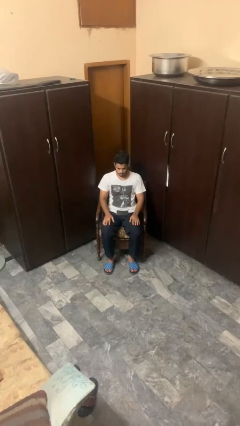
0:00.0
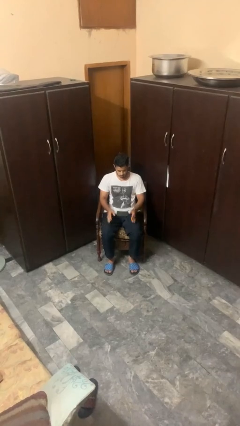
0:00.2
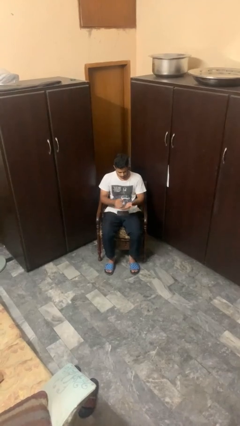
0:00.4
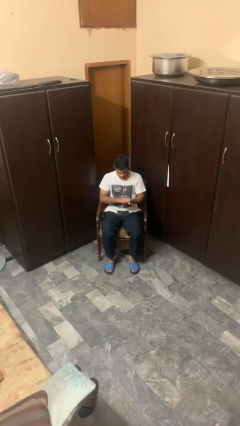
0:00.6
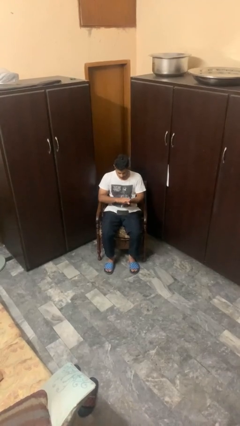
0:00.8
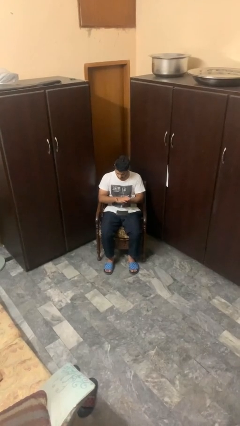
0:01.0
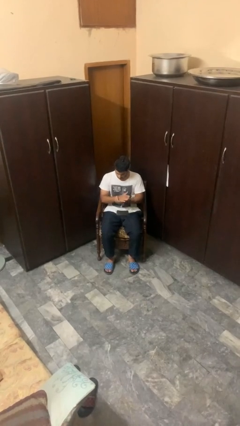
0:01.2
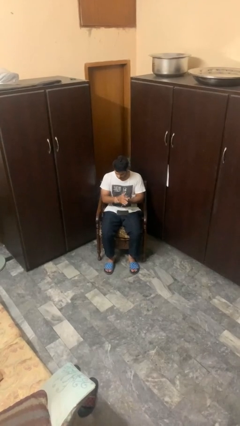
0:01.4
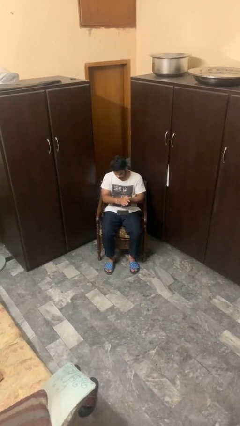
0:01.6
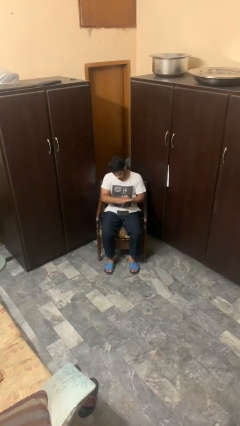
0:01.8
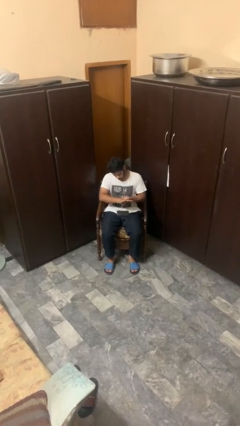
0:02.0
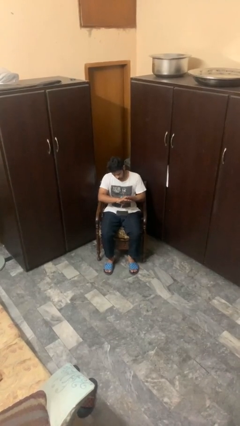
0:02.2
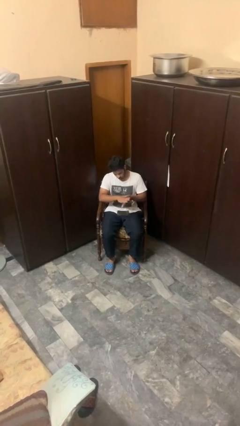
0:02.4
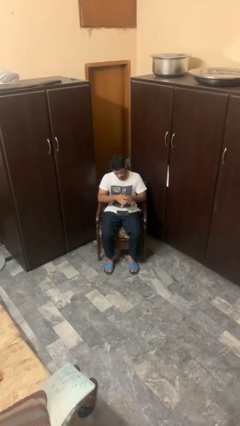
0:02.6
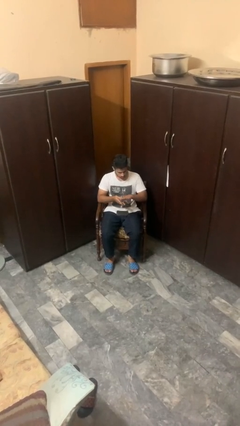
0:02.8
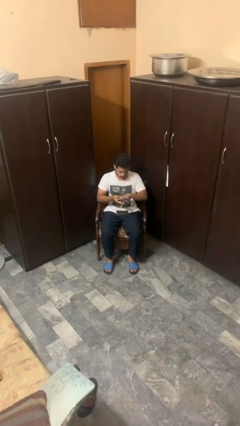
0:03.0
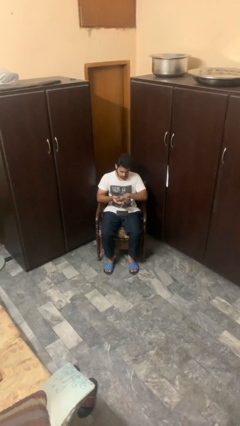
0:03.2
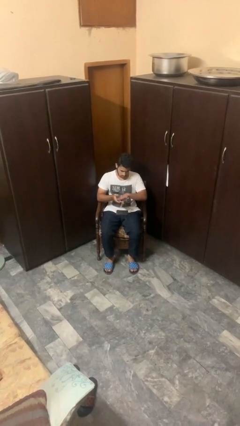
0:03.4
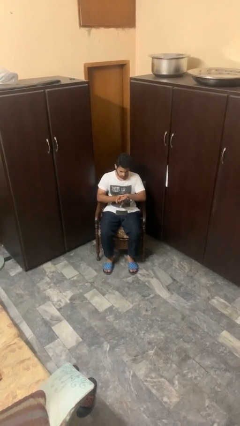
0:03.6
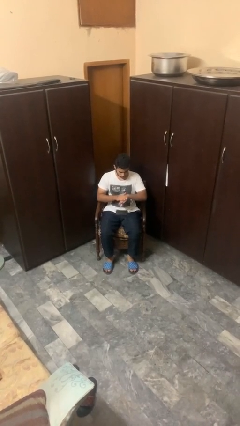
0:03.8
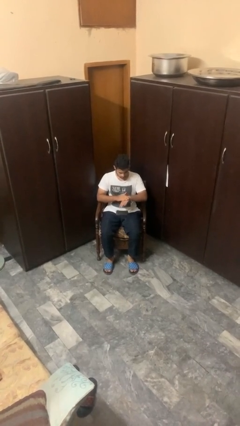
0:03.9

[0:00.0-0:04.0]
person looks at hands in lap

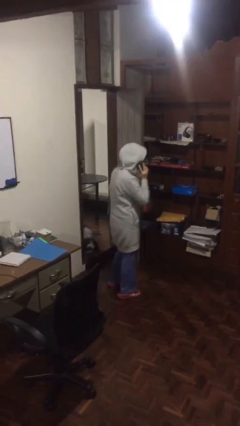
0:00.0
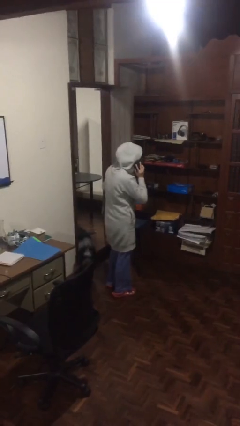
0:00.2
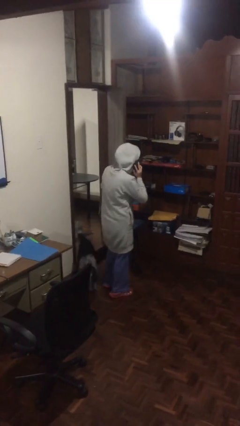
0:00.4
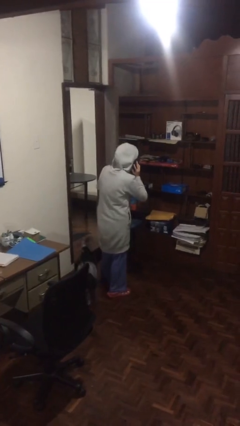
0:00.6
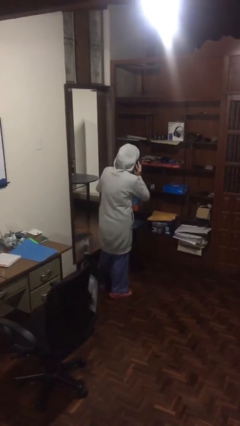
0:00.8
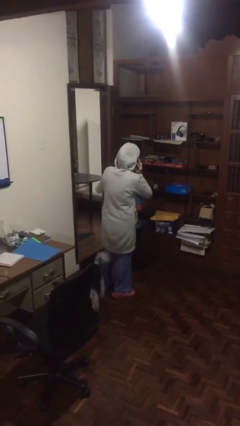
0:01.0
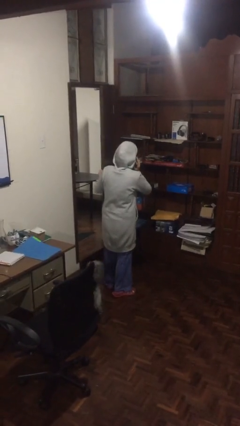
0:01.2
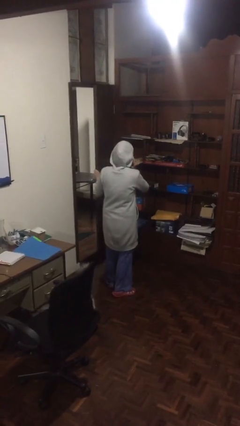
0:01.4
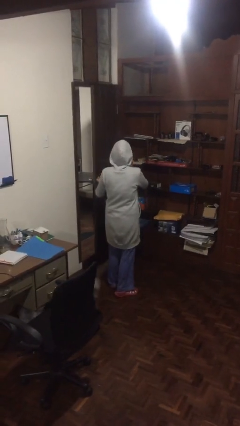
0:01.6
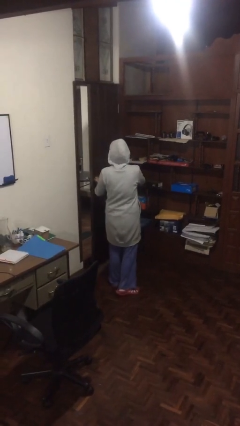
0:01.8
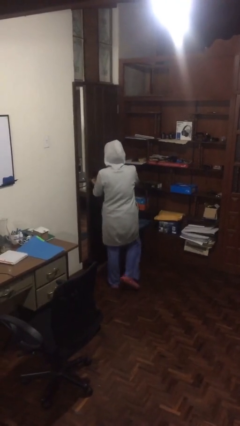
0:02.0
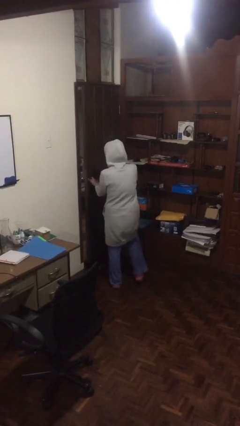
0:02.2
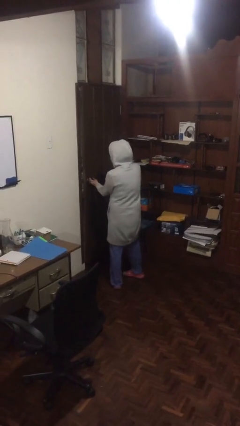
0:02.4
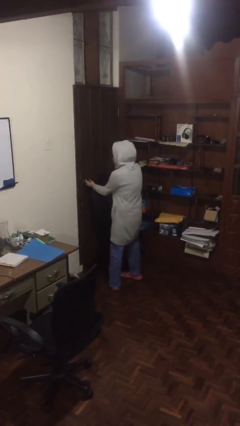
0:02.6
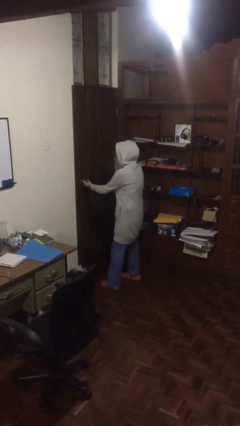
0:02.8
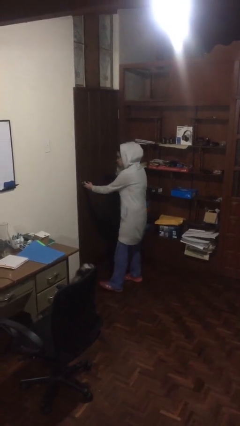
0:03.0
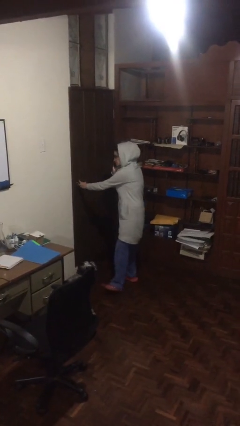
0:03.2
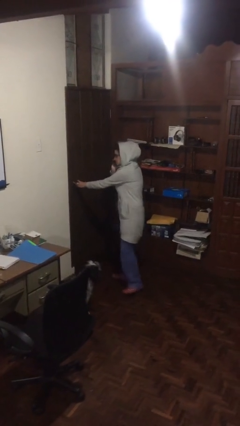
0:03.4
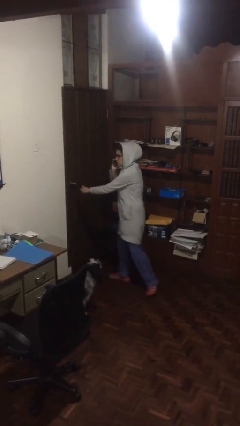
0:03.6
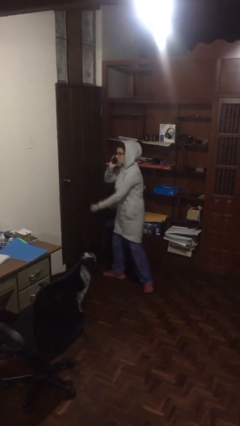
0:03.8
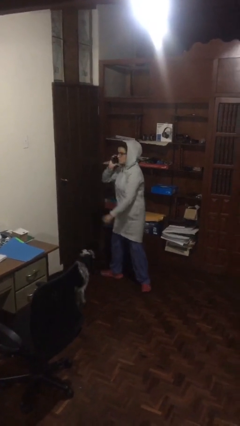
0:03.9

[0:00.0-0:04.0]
person closes facility door

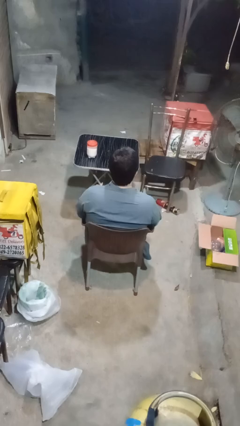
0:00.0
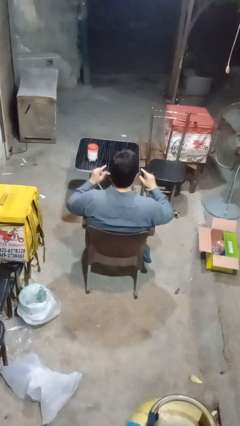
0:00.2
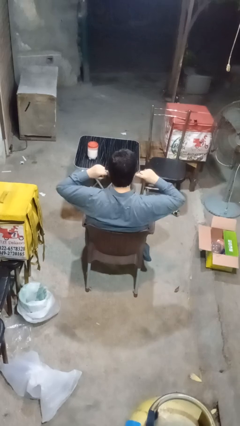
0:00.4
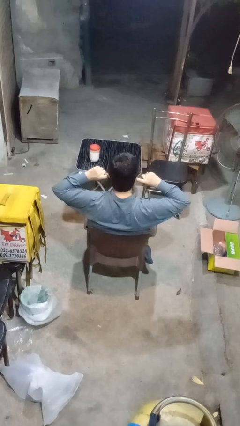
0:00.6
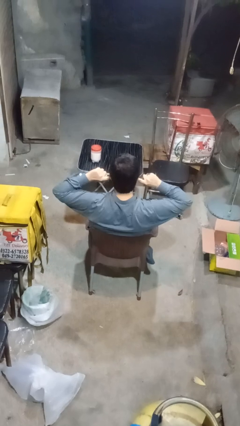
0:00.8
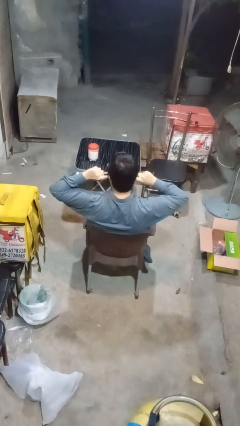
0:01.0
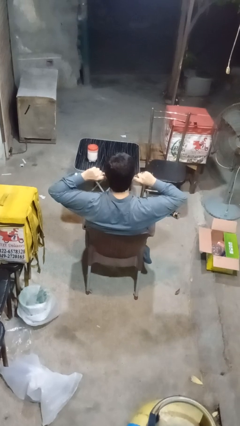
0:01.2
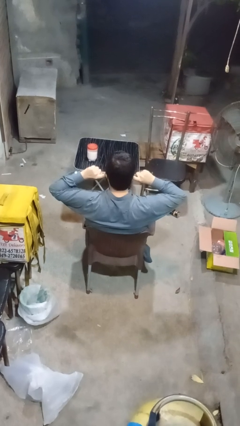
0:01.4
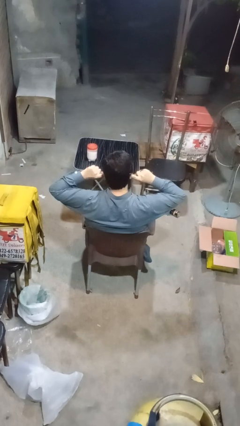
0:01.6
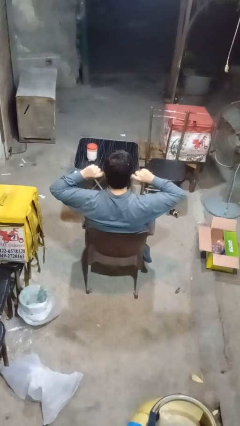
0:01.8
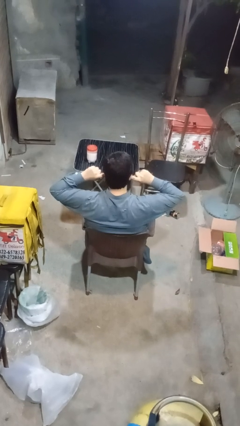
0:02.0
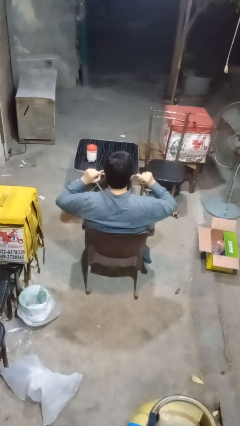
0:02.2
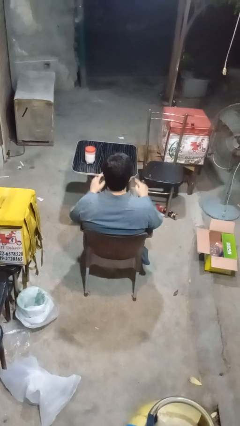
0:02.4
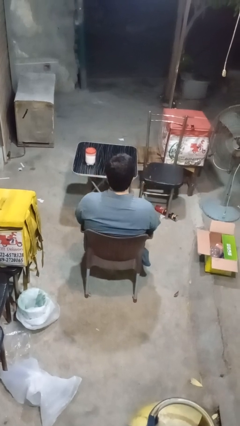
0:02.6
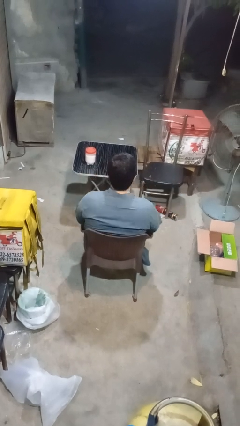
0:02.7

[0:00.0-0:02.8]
person puts fingers in ear

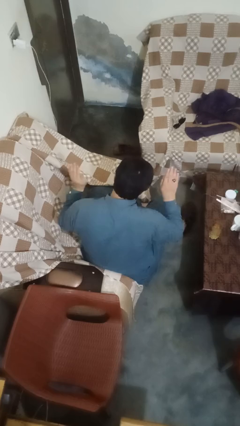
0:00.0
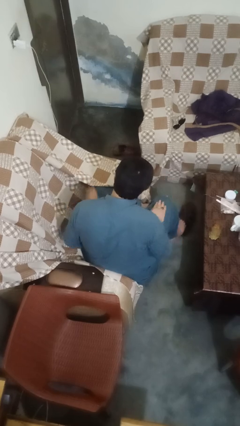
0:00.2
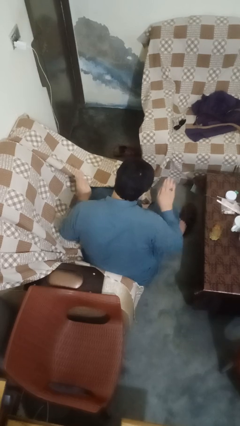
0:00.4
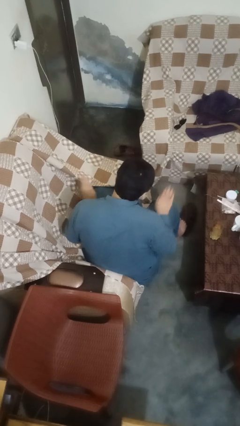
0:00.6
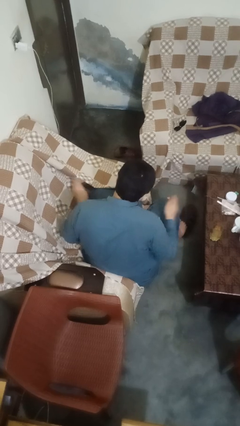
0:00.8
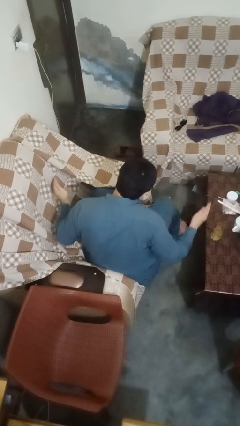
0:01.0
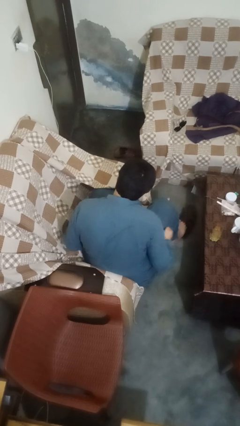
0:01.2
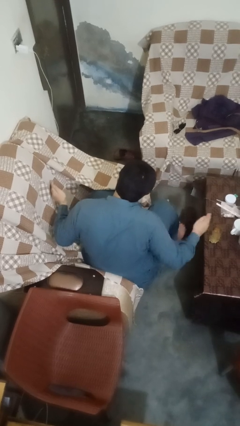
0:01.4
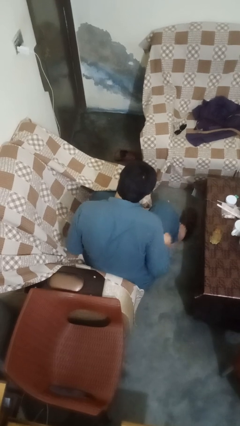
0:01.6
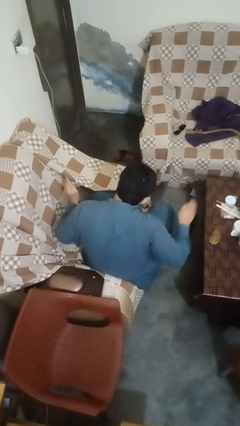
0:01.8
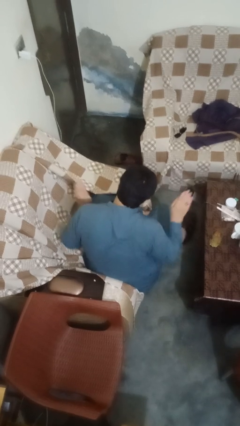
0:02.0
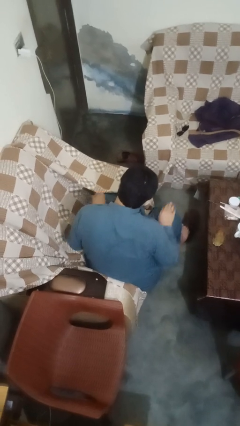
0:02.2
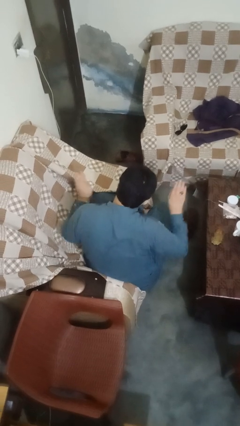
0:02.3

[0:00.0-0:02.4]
person slaps hands on thighs

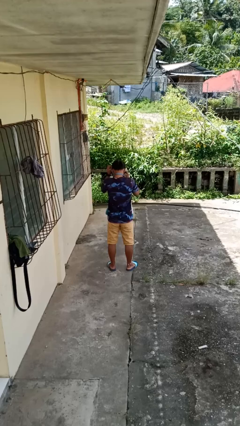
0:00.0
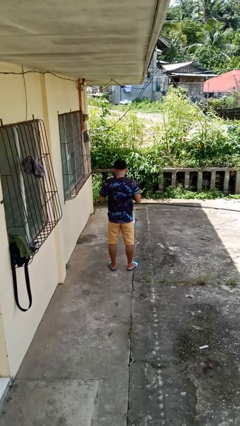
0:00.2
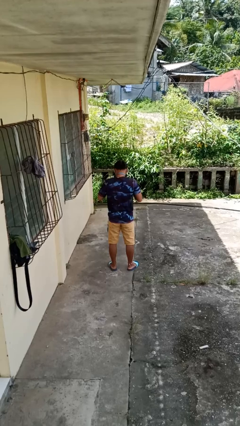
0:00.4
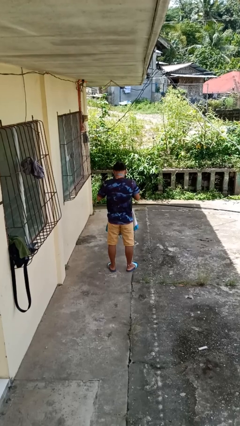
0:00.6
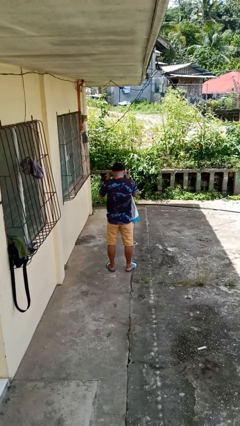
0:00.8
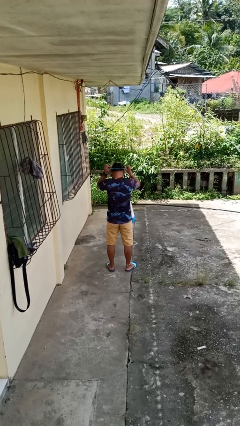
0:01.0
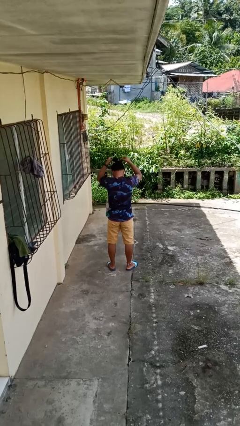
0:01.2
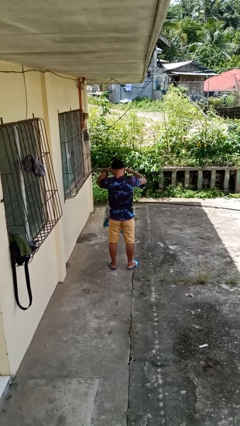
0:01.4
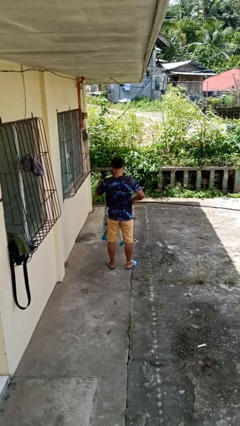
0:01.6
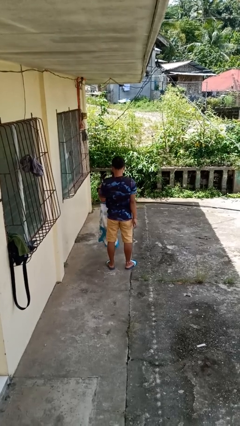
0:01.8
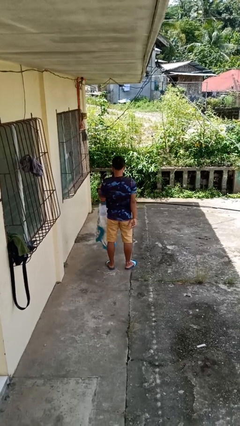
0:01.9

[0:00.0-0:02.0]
person takes off apron

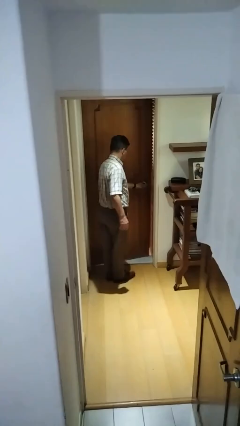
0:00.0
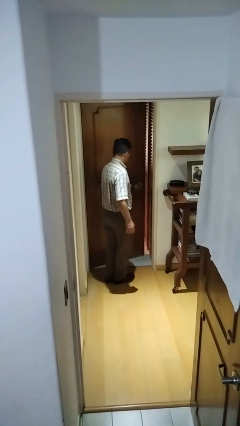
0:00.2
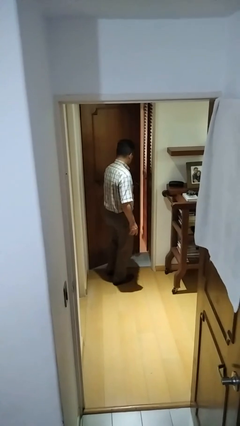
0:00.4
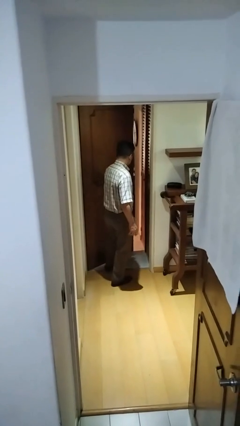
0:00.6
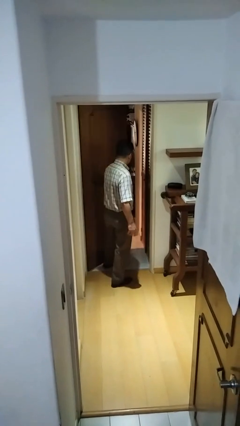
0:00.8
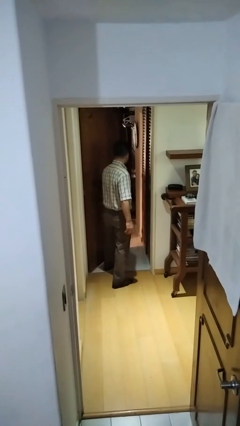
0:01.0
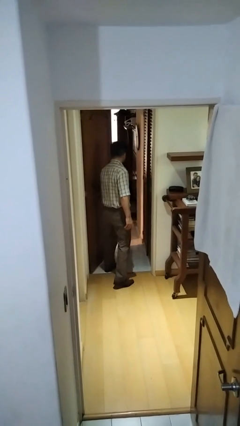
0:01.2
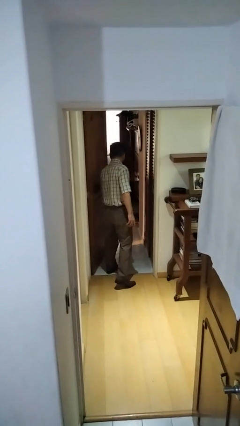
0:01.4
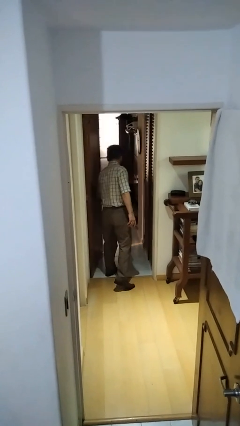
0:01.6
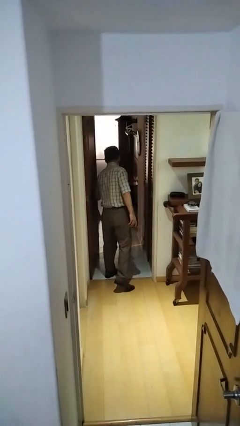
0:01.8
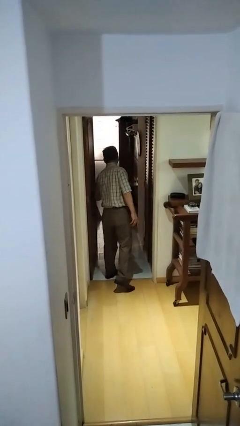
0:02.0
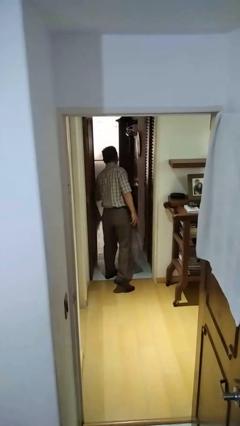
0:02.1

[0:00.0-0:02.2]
person opens facility door
